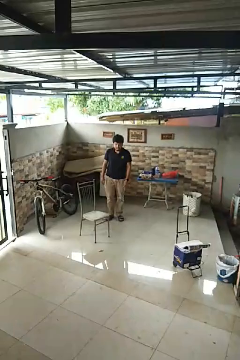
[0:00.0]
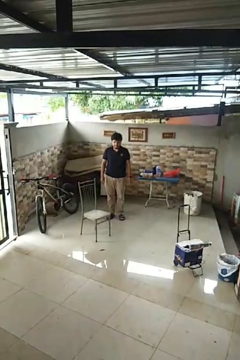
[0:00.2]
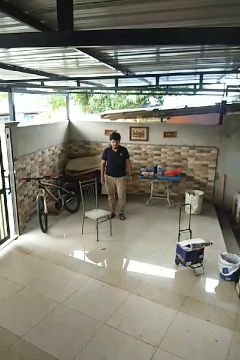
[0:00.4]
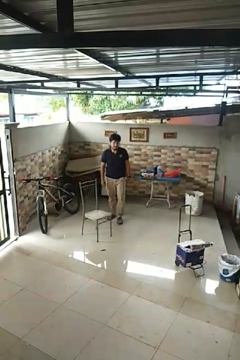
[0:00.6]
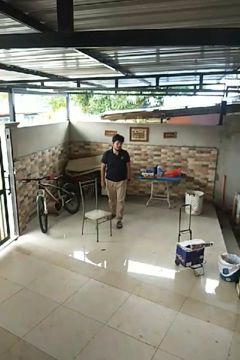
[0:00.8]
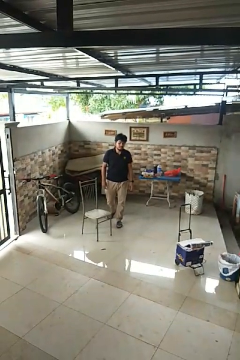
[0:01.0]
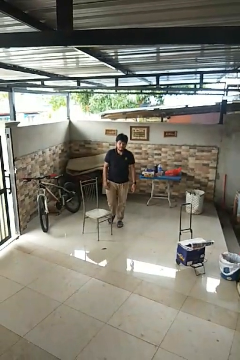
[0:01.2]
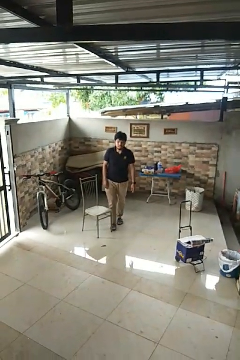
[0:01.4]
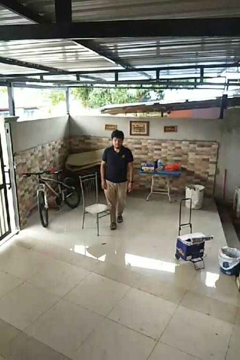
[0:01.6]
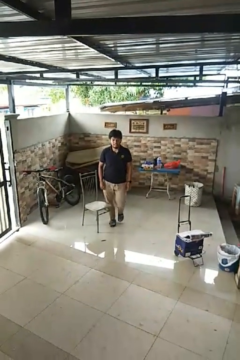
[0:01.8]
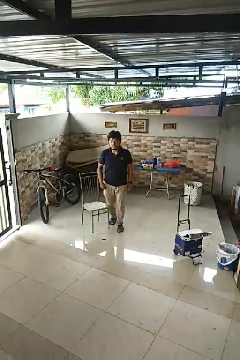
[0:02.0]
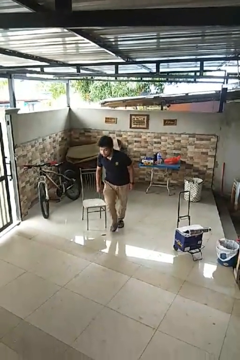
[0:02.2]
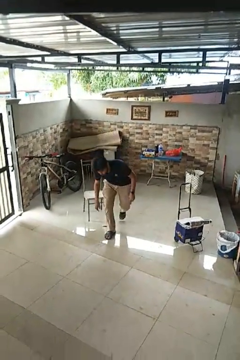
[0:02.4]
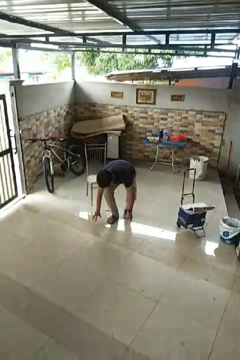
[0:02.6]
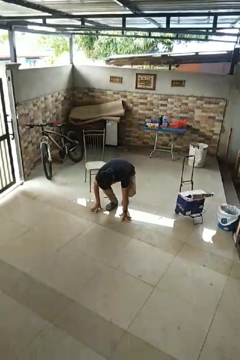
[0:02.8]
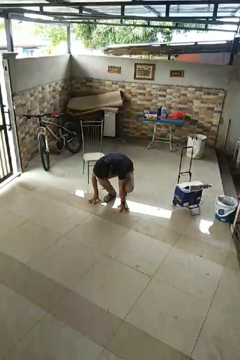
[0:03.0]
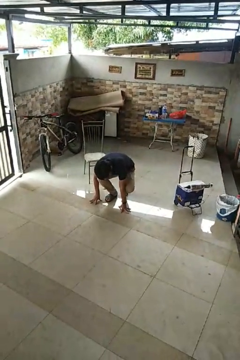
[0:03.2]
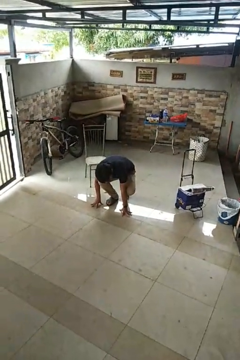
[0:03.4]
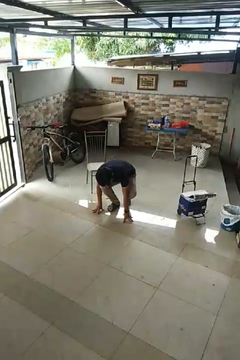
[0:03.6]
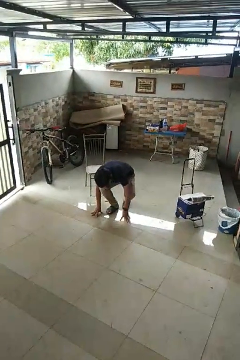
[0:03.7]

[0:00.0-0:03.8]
person trips on object on floor

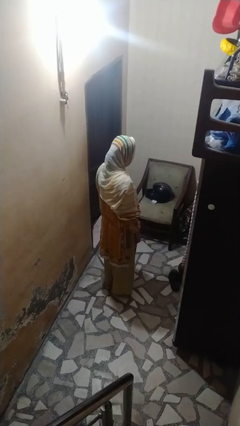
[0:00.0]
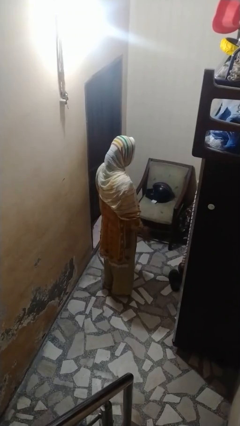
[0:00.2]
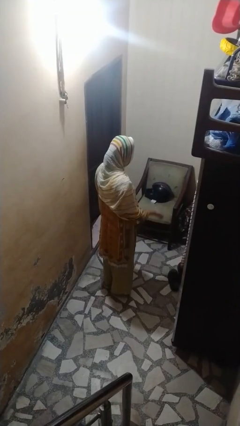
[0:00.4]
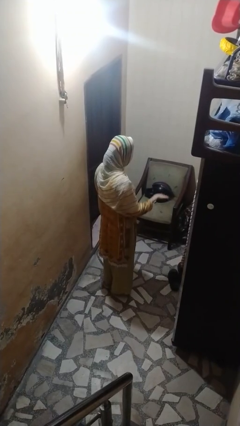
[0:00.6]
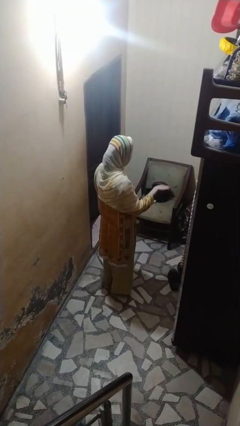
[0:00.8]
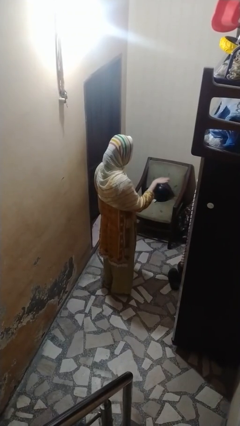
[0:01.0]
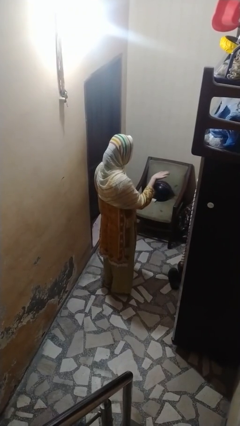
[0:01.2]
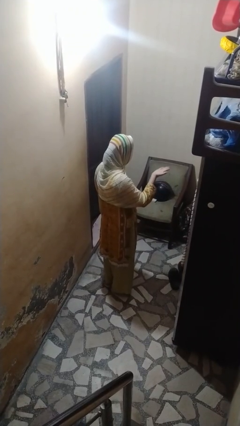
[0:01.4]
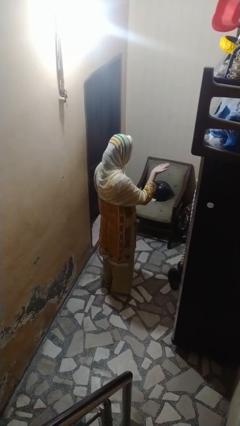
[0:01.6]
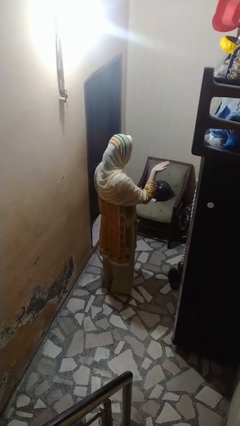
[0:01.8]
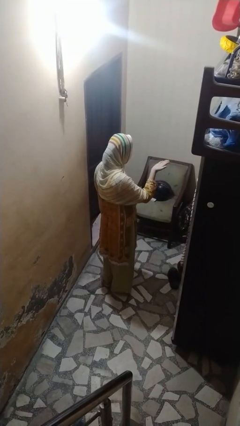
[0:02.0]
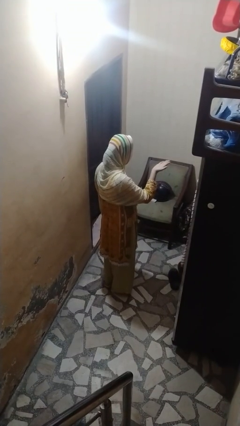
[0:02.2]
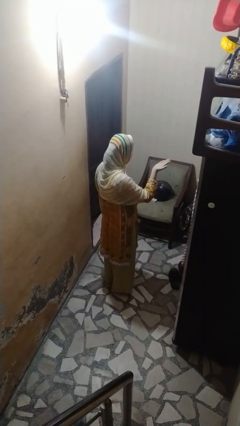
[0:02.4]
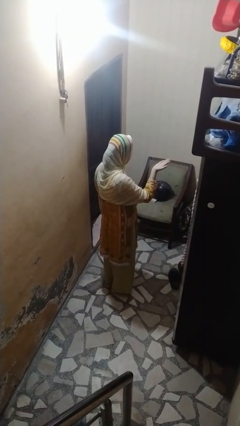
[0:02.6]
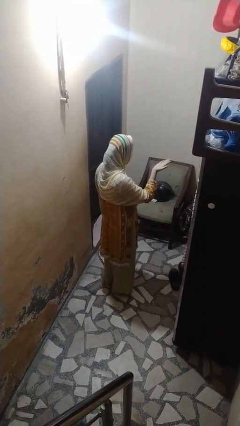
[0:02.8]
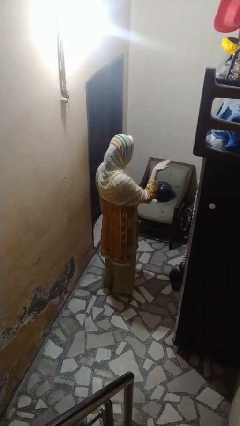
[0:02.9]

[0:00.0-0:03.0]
person gestures swipe up

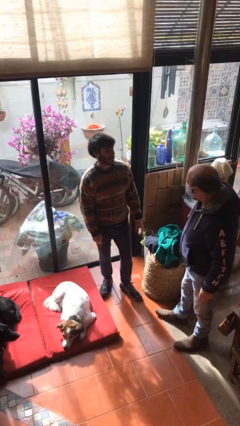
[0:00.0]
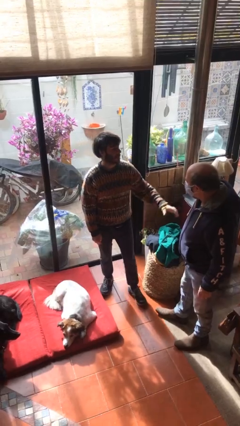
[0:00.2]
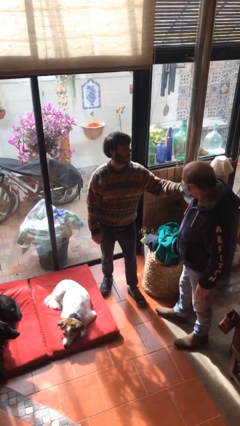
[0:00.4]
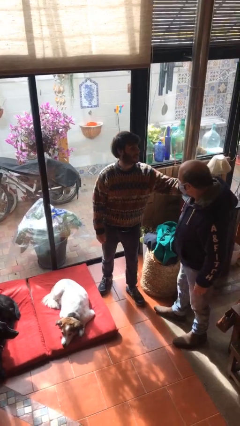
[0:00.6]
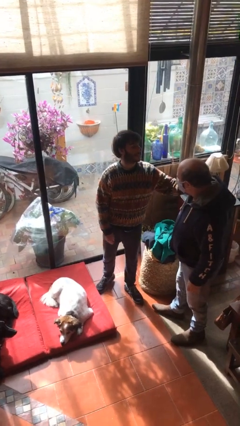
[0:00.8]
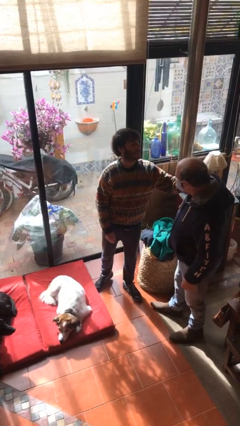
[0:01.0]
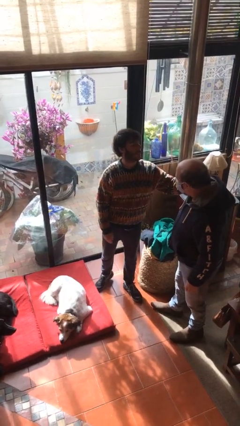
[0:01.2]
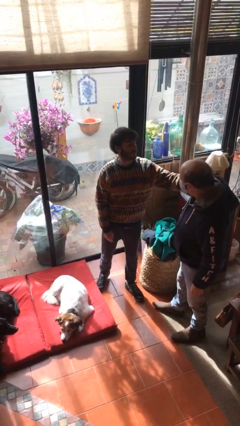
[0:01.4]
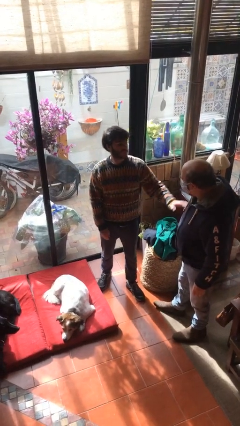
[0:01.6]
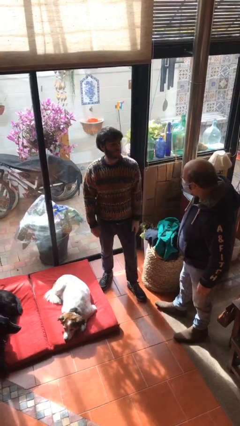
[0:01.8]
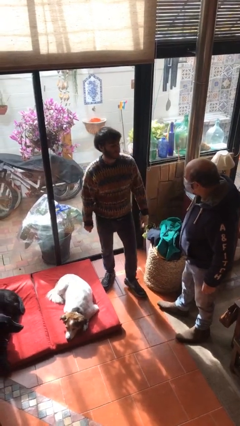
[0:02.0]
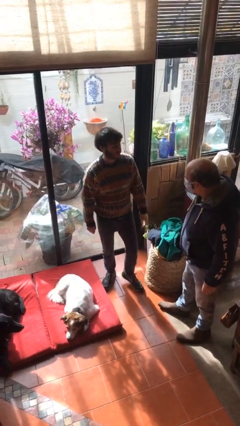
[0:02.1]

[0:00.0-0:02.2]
person pounds shoulders of person

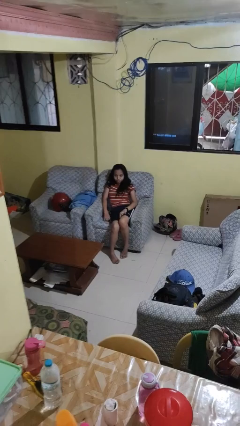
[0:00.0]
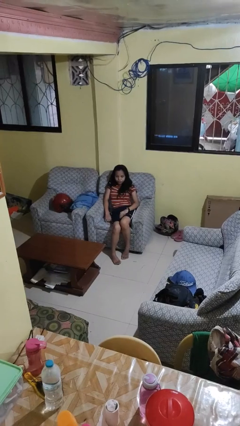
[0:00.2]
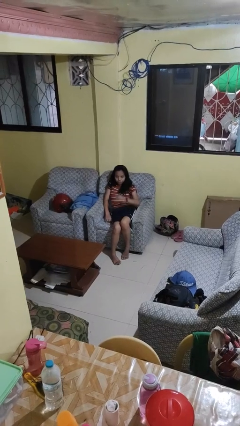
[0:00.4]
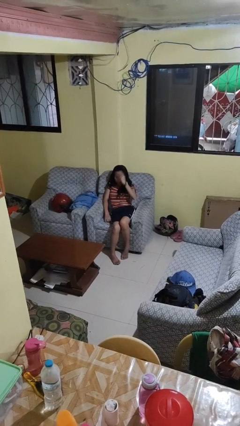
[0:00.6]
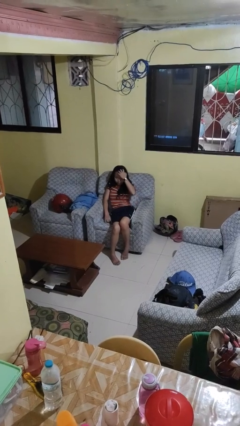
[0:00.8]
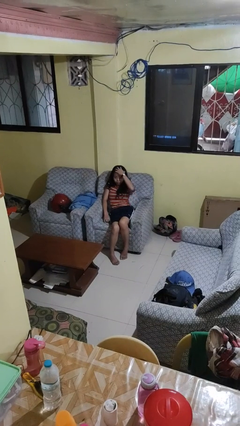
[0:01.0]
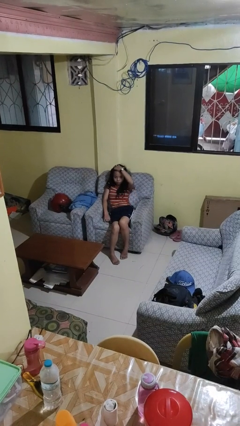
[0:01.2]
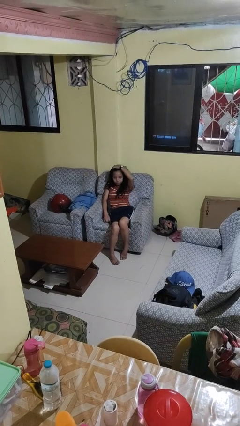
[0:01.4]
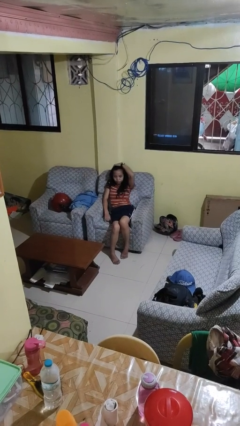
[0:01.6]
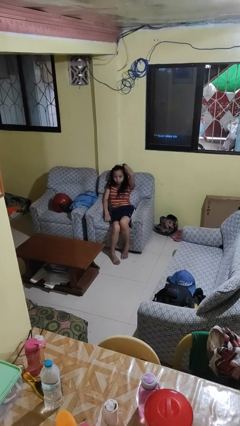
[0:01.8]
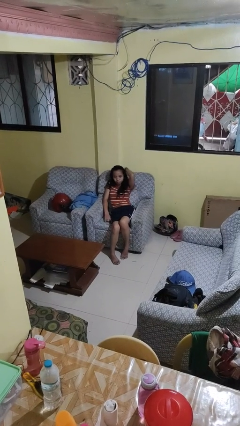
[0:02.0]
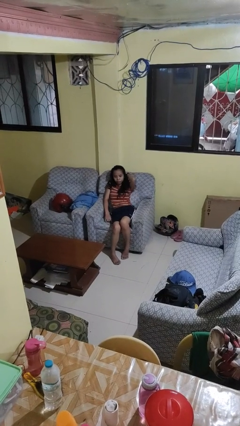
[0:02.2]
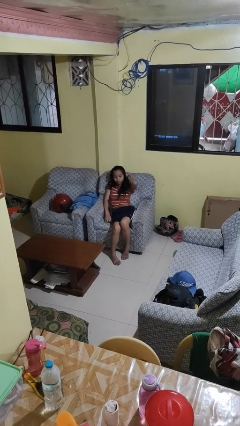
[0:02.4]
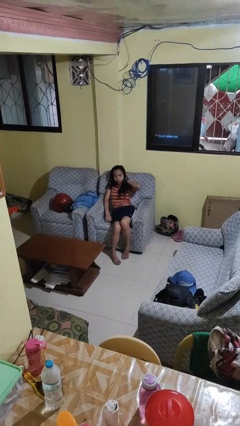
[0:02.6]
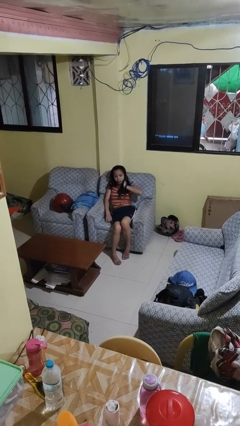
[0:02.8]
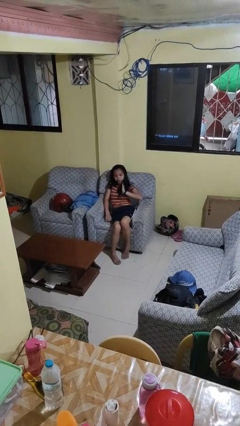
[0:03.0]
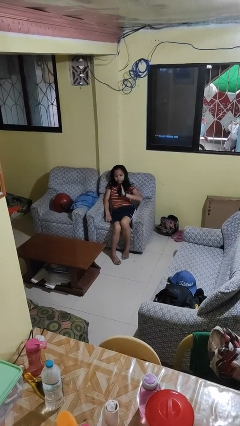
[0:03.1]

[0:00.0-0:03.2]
person strokes hair

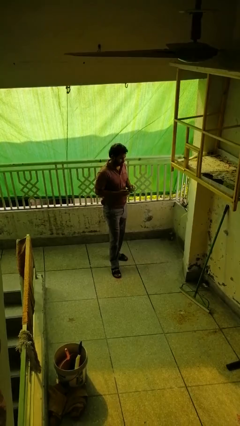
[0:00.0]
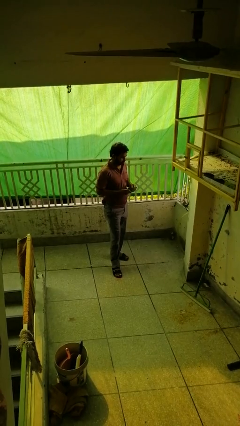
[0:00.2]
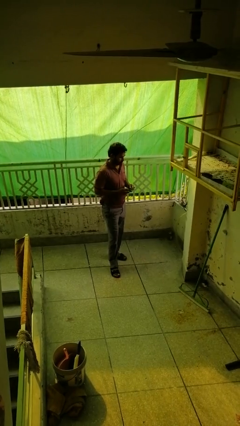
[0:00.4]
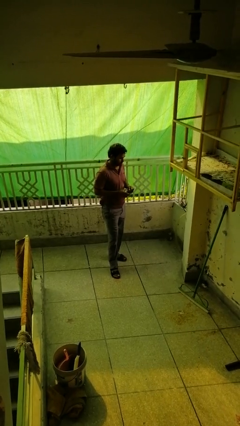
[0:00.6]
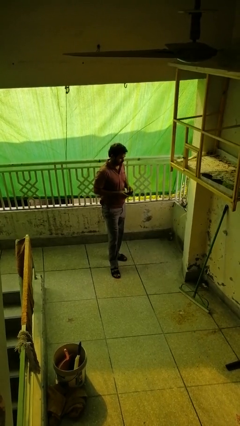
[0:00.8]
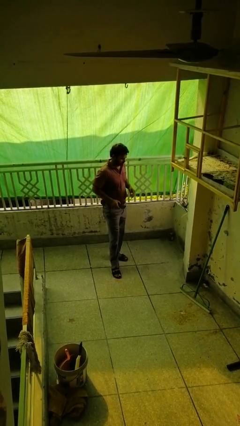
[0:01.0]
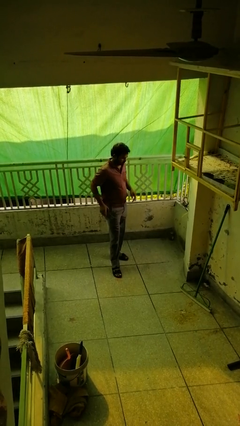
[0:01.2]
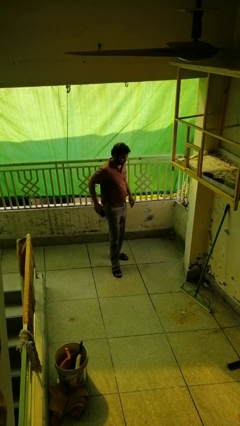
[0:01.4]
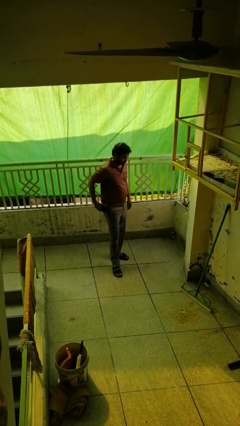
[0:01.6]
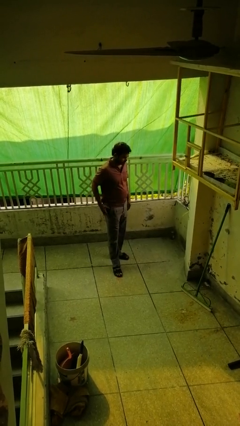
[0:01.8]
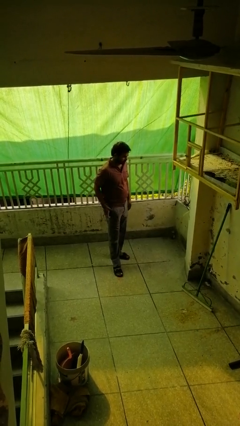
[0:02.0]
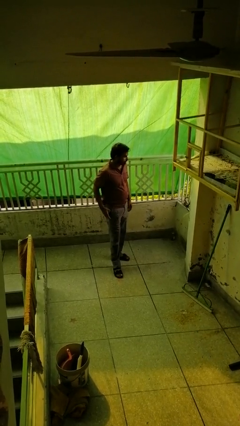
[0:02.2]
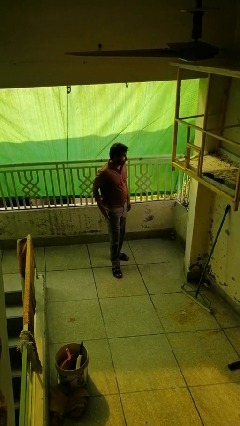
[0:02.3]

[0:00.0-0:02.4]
person puts phone into pocket

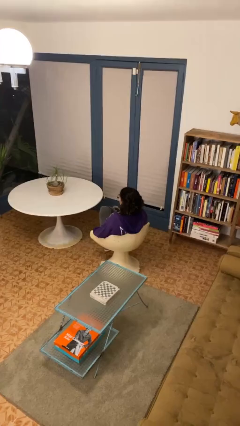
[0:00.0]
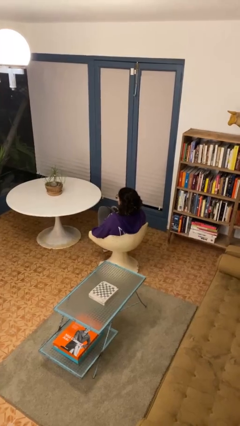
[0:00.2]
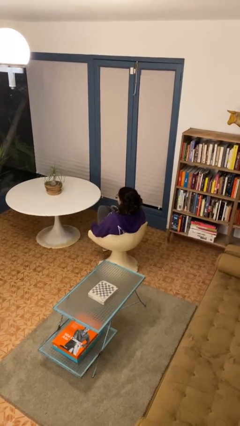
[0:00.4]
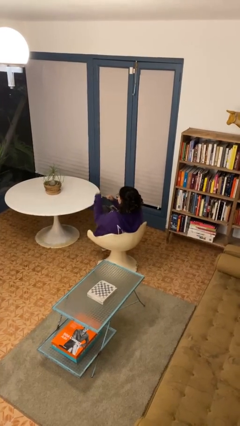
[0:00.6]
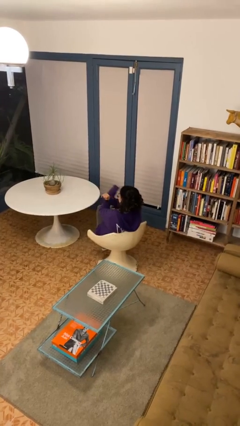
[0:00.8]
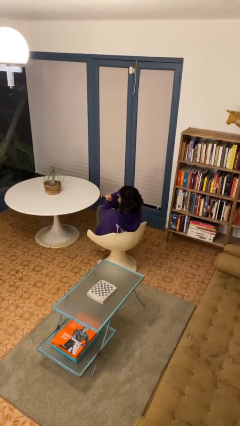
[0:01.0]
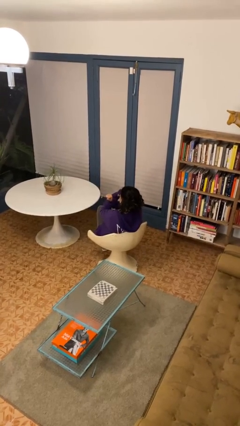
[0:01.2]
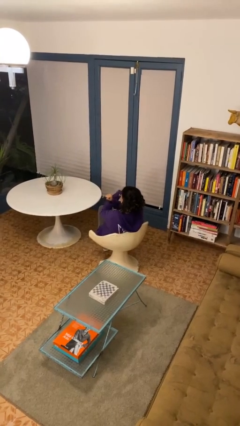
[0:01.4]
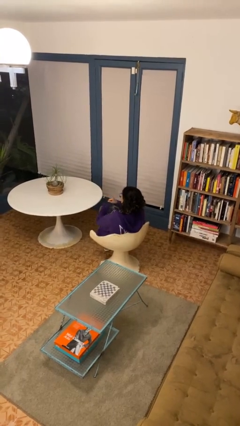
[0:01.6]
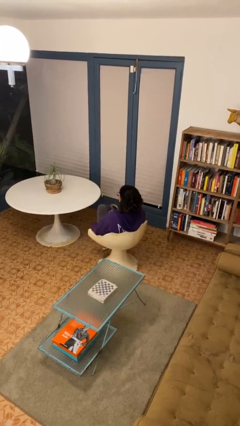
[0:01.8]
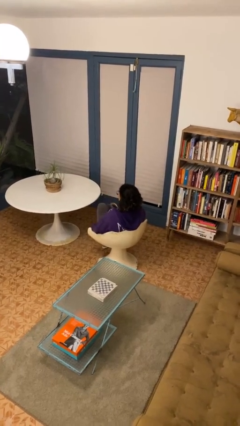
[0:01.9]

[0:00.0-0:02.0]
person gestures arms x

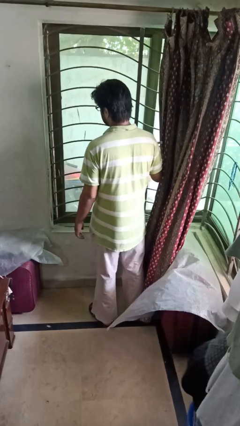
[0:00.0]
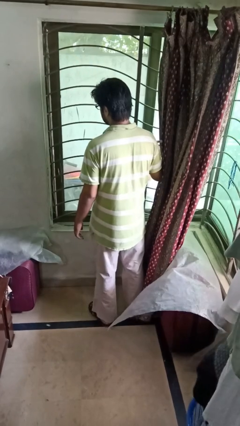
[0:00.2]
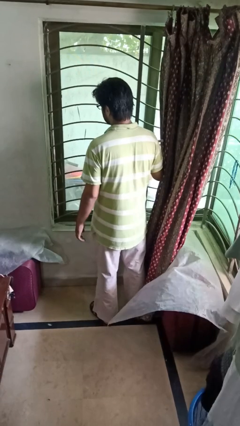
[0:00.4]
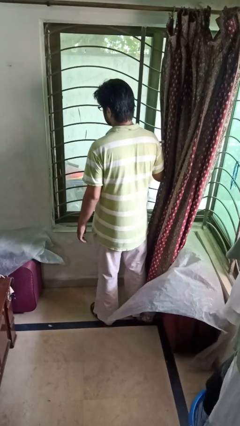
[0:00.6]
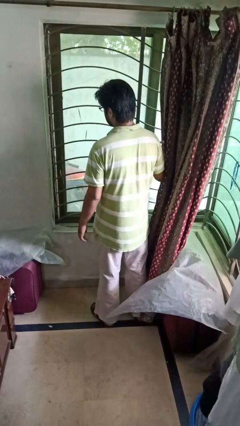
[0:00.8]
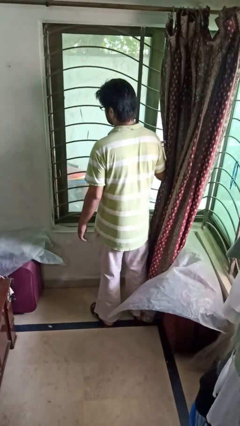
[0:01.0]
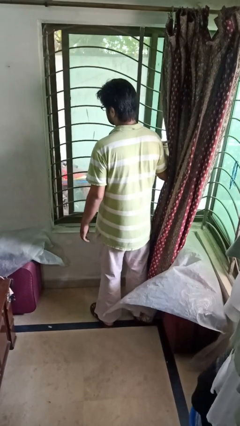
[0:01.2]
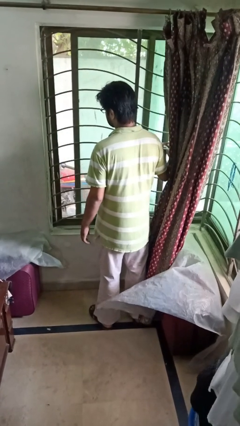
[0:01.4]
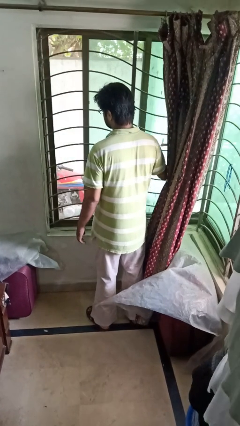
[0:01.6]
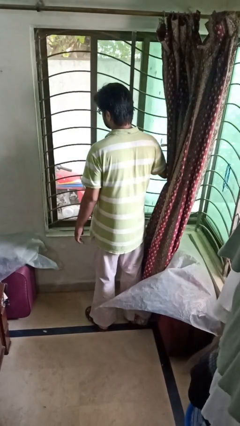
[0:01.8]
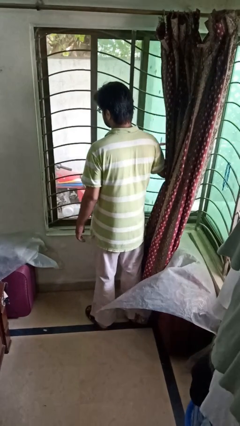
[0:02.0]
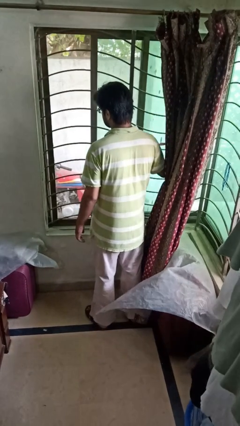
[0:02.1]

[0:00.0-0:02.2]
person opens home window
